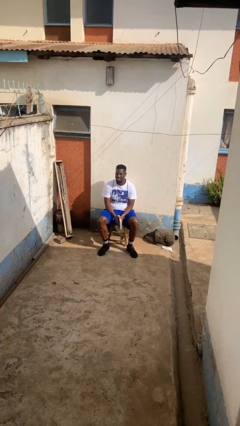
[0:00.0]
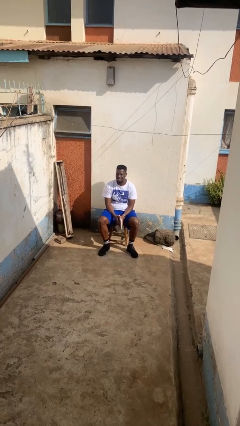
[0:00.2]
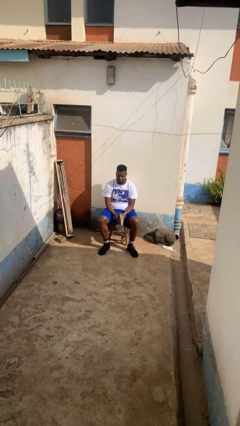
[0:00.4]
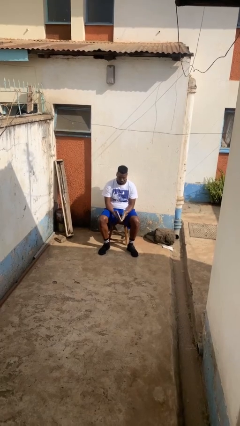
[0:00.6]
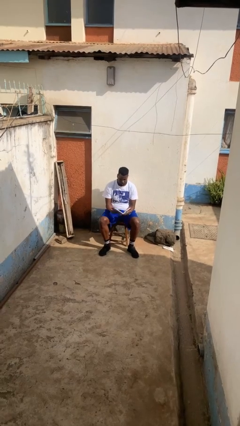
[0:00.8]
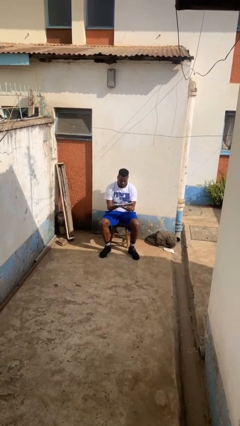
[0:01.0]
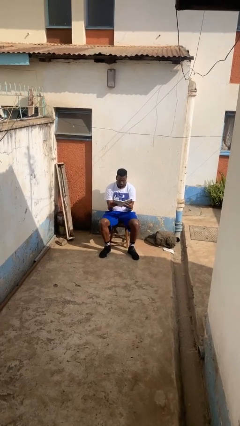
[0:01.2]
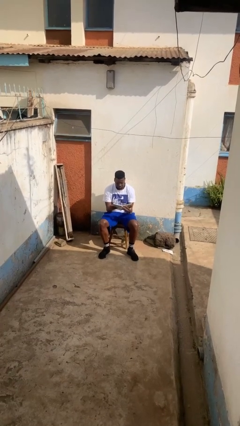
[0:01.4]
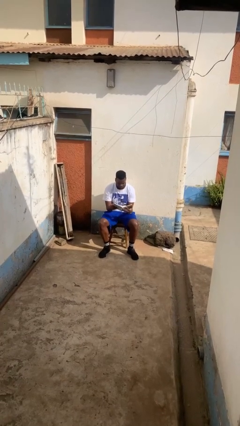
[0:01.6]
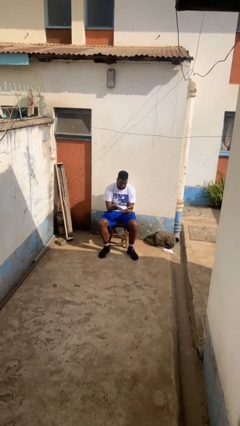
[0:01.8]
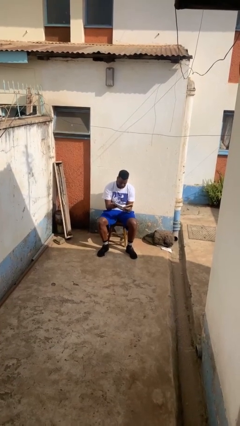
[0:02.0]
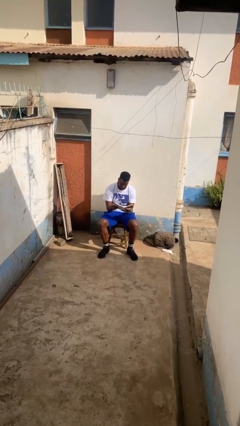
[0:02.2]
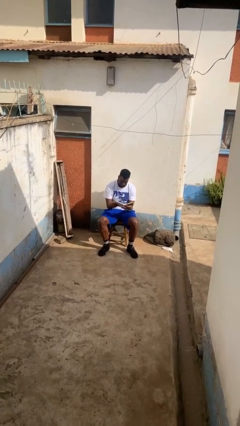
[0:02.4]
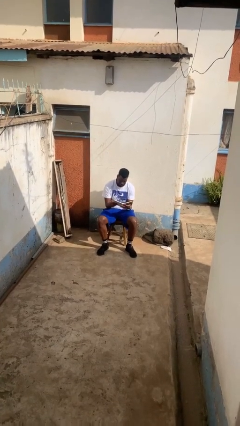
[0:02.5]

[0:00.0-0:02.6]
person reads book

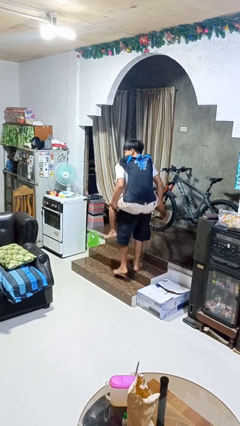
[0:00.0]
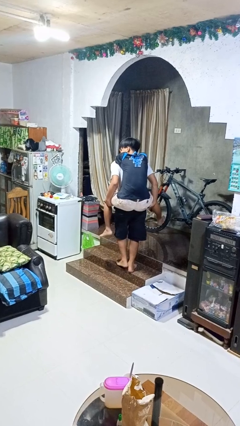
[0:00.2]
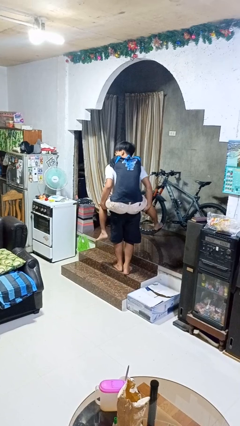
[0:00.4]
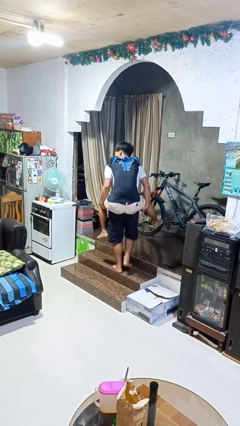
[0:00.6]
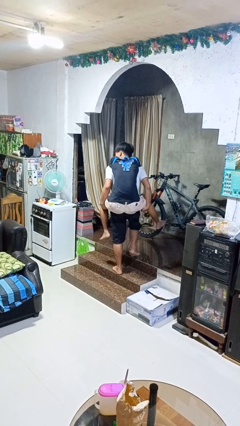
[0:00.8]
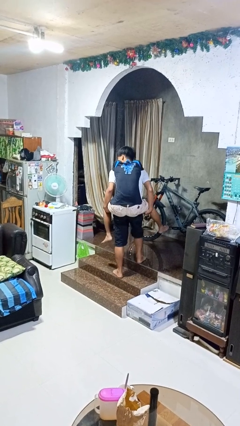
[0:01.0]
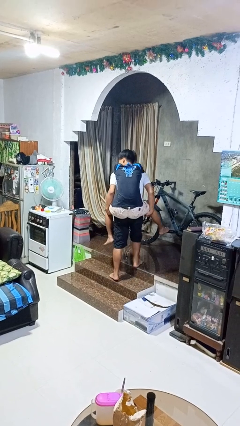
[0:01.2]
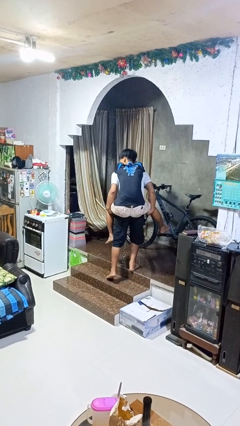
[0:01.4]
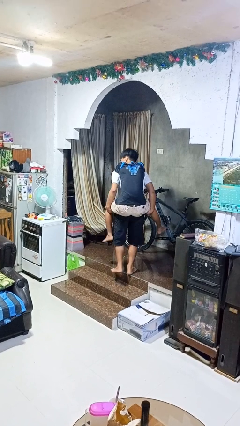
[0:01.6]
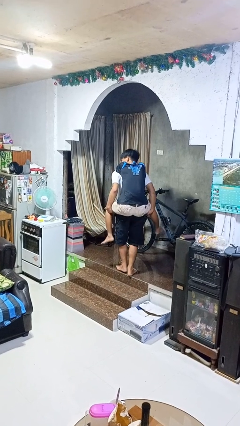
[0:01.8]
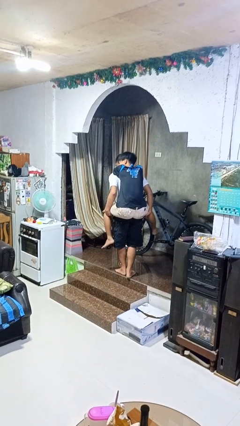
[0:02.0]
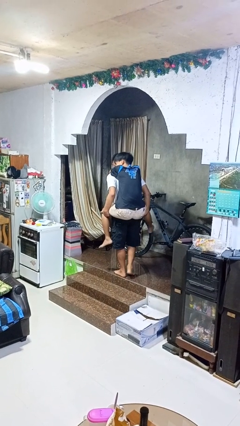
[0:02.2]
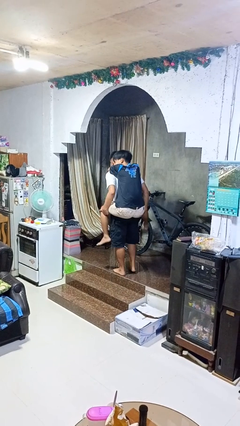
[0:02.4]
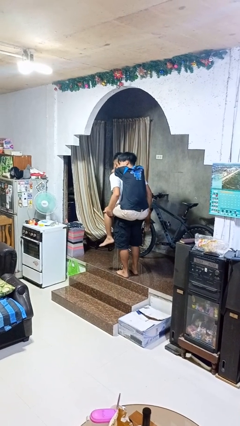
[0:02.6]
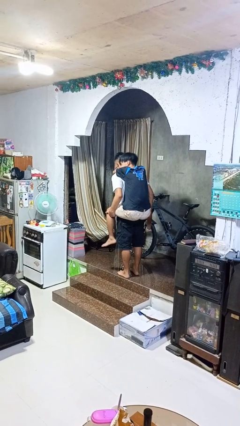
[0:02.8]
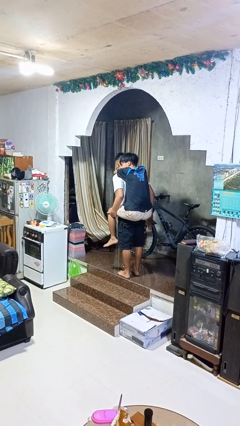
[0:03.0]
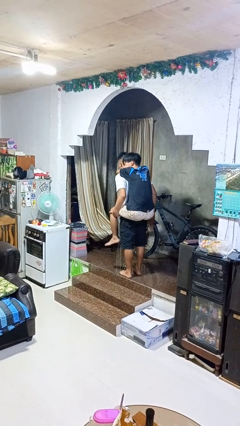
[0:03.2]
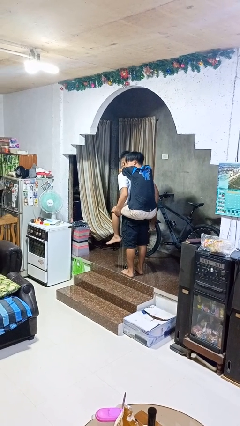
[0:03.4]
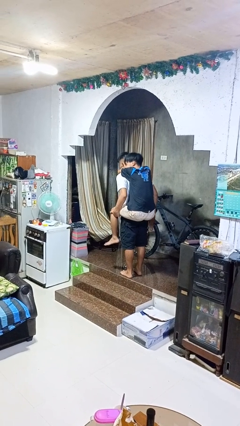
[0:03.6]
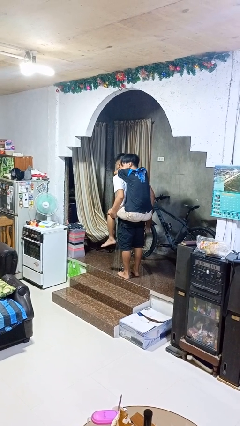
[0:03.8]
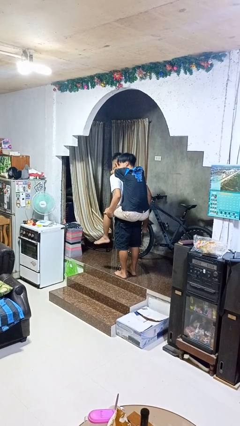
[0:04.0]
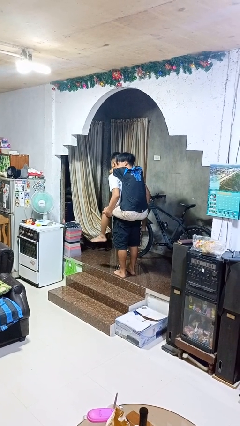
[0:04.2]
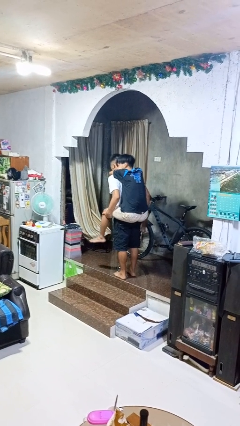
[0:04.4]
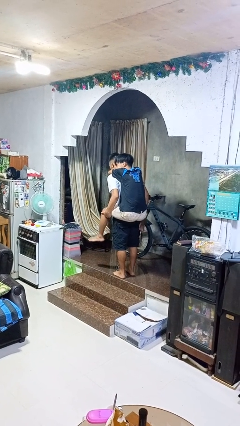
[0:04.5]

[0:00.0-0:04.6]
person carries person on back

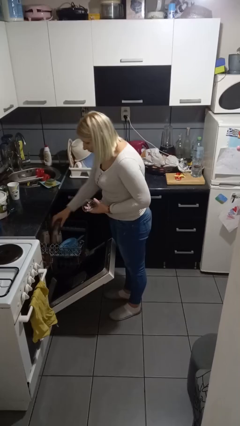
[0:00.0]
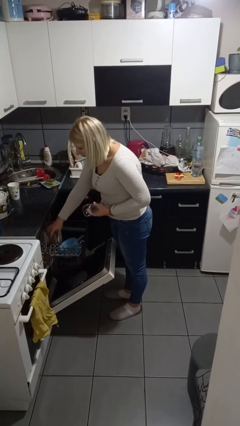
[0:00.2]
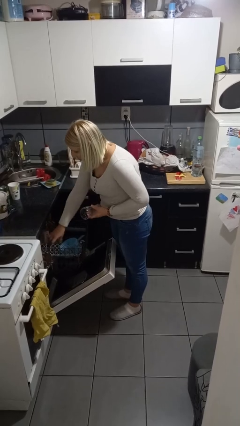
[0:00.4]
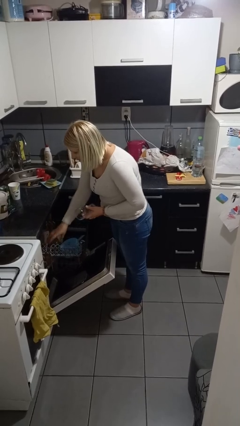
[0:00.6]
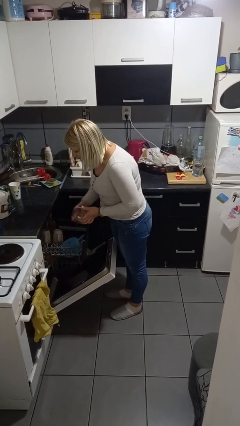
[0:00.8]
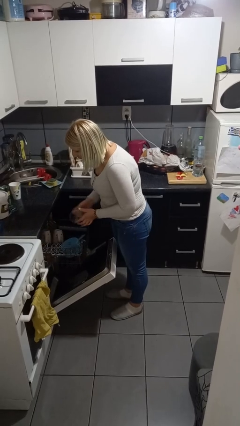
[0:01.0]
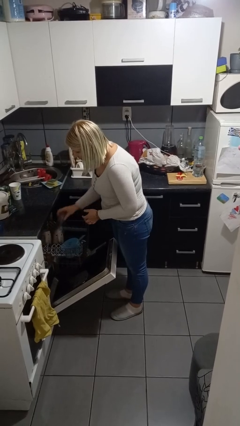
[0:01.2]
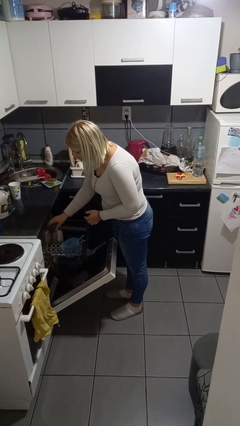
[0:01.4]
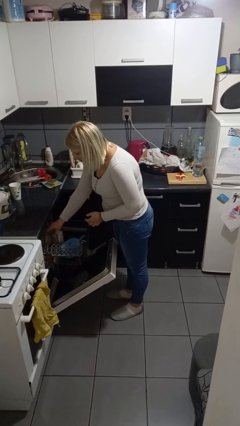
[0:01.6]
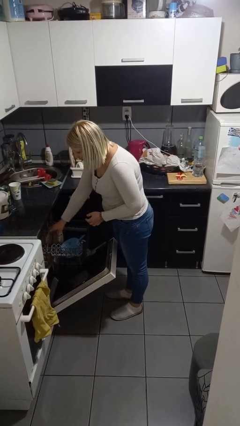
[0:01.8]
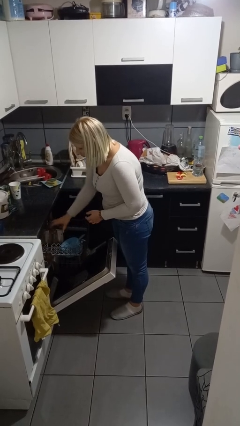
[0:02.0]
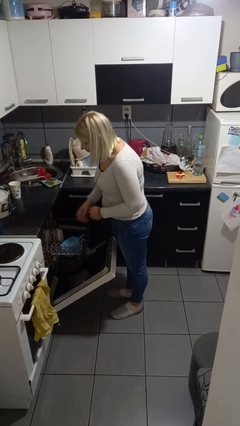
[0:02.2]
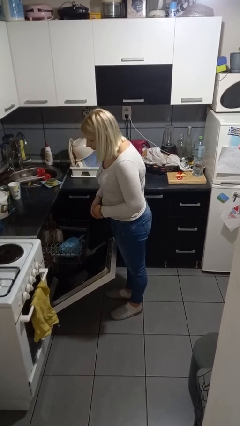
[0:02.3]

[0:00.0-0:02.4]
person loads dishwasher

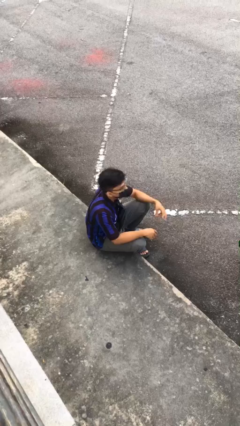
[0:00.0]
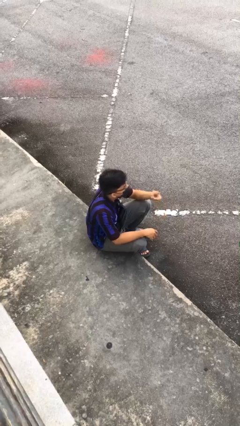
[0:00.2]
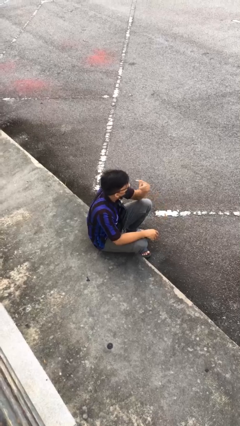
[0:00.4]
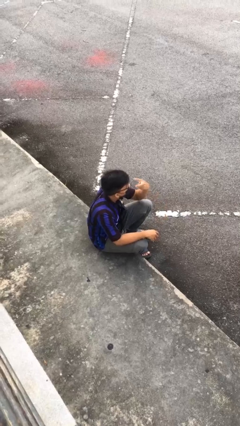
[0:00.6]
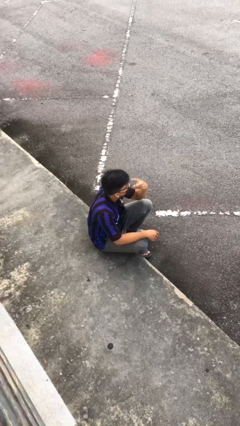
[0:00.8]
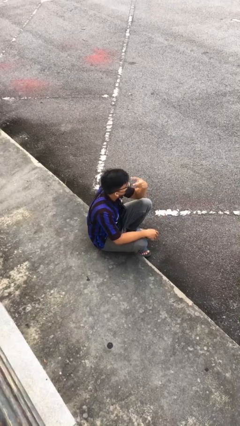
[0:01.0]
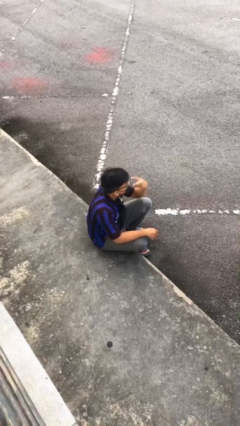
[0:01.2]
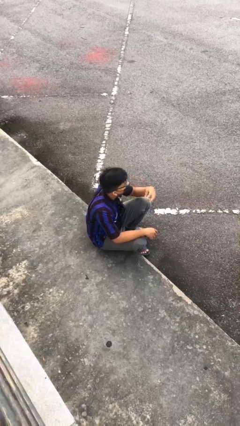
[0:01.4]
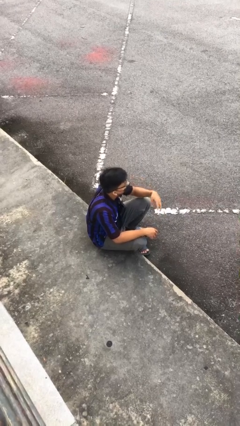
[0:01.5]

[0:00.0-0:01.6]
person gestures watch closely

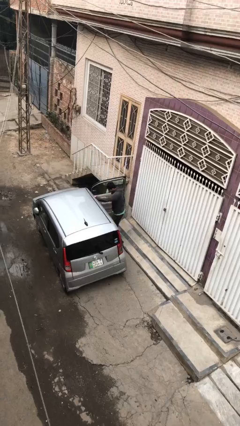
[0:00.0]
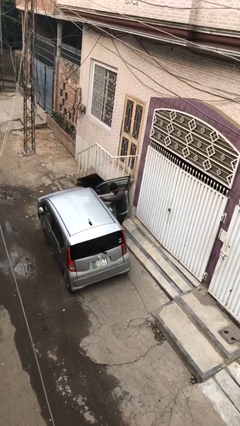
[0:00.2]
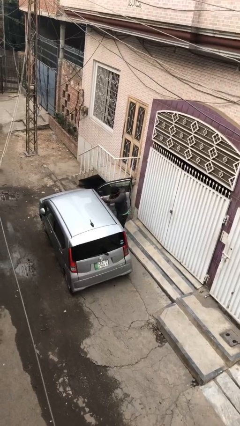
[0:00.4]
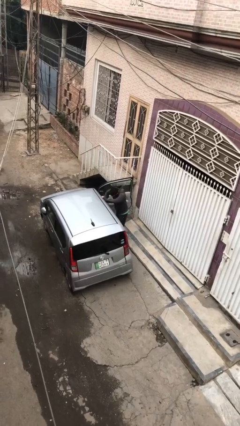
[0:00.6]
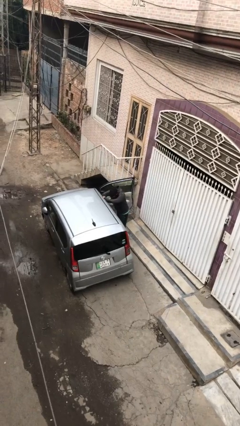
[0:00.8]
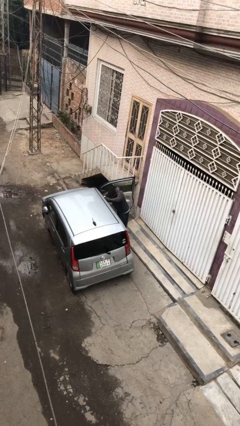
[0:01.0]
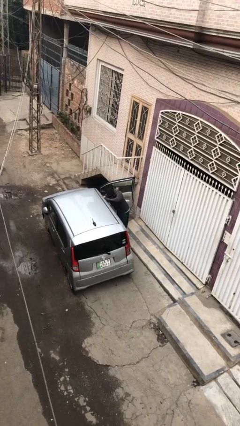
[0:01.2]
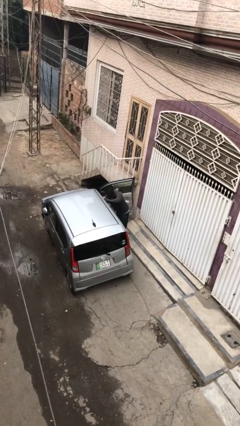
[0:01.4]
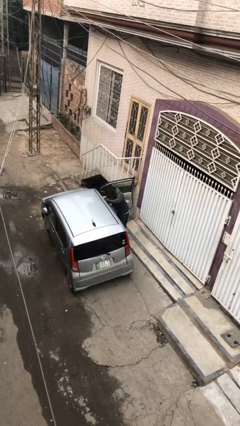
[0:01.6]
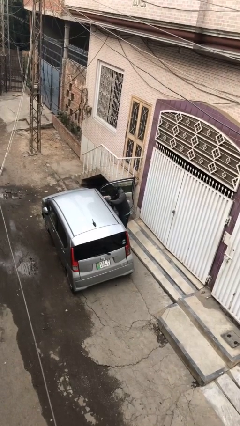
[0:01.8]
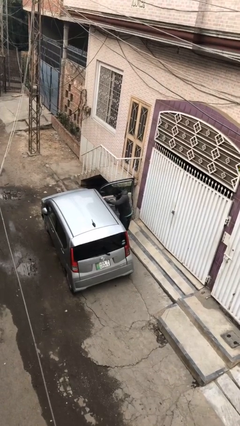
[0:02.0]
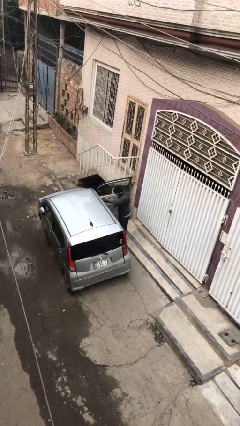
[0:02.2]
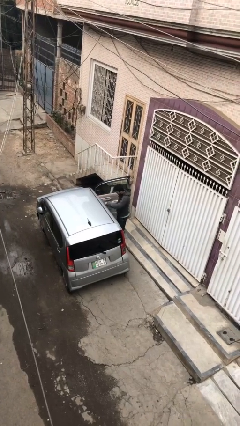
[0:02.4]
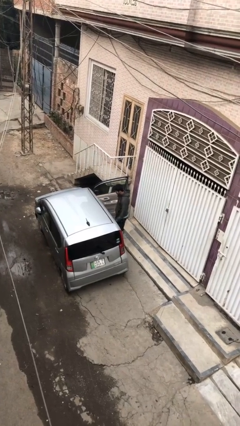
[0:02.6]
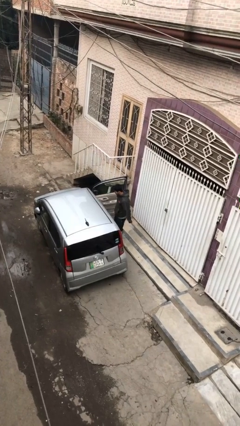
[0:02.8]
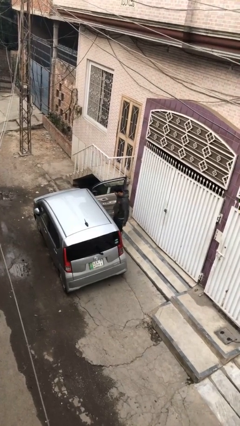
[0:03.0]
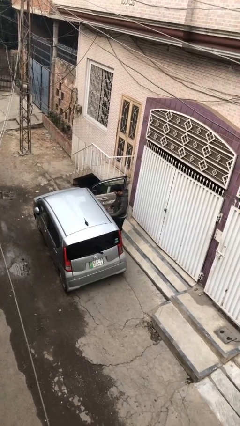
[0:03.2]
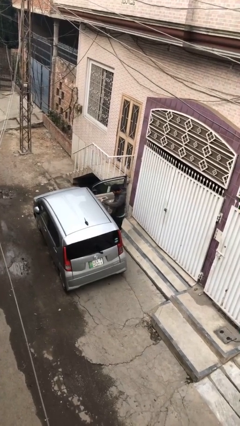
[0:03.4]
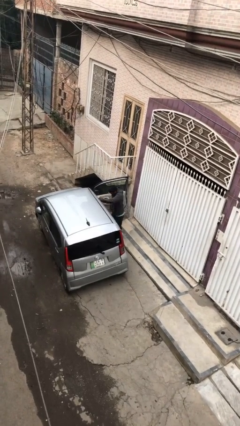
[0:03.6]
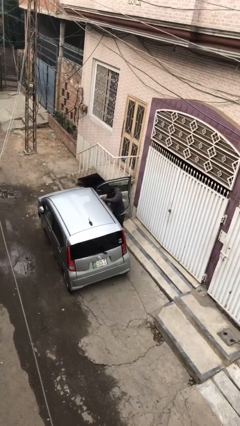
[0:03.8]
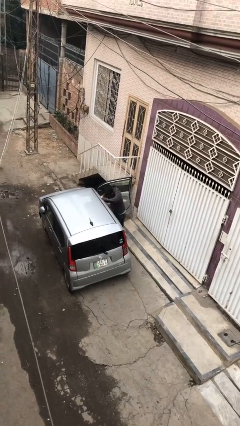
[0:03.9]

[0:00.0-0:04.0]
person loads car

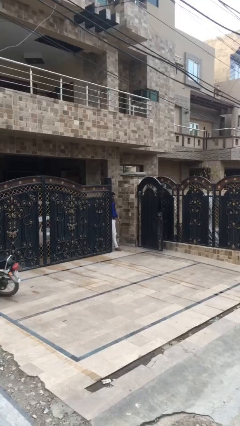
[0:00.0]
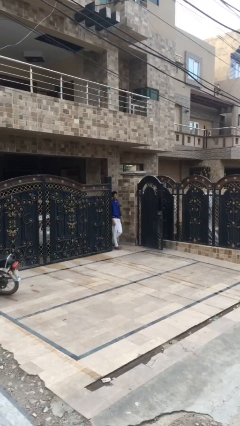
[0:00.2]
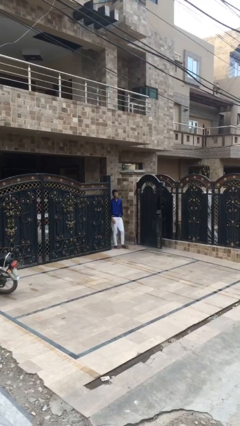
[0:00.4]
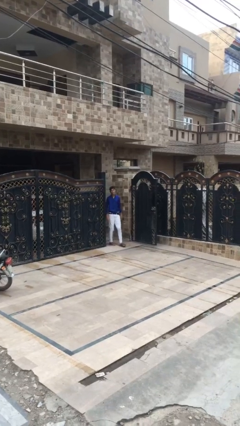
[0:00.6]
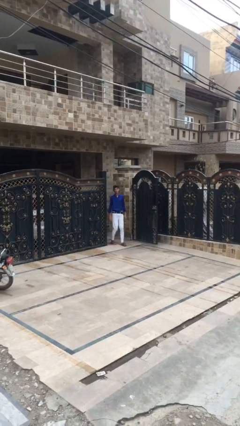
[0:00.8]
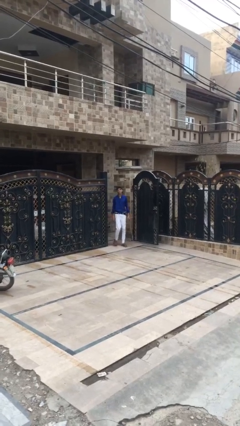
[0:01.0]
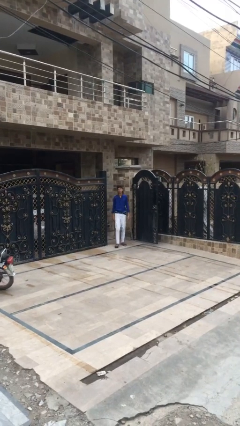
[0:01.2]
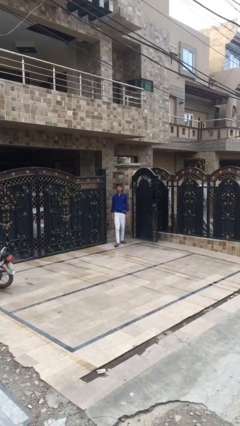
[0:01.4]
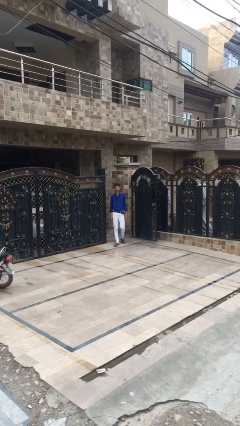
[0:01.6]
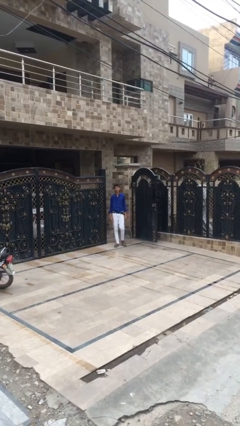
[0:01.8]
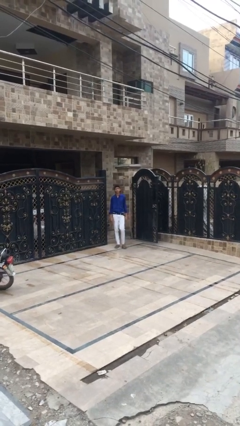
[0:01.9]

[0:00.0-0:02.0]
person enters scene through structure

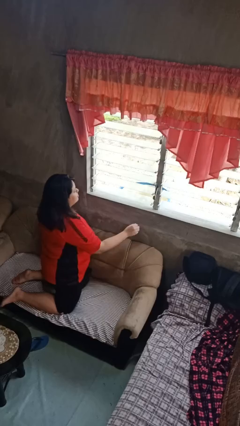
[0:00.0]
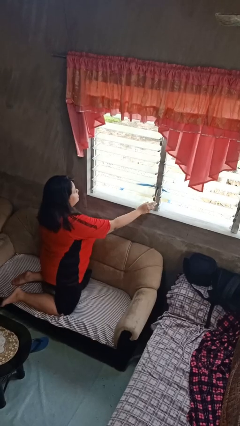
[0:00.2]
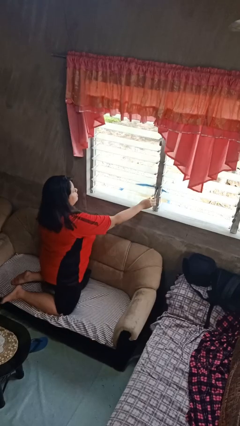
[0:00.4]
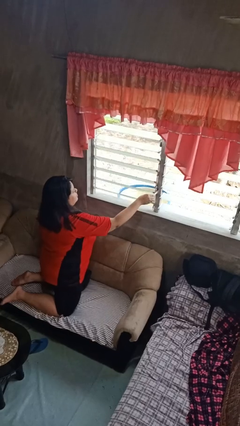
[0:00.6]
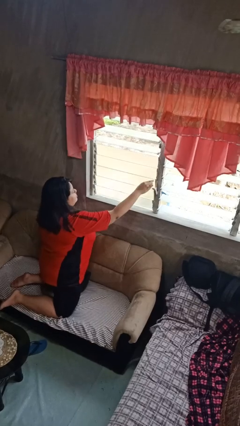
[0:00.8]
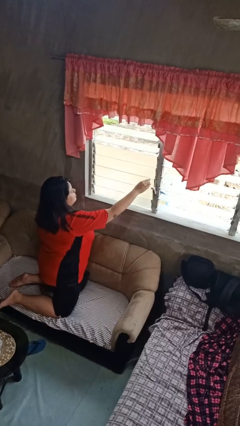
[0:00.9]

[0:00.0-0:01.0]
person closes home window
